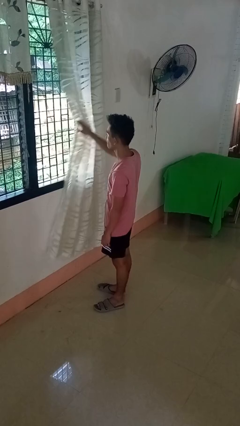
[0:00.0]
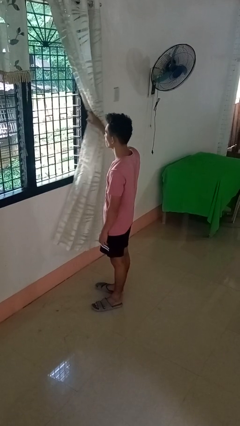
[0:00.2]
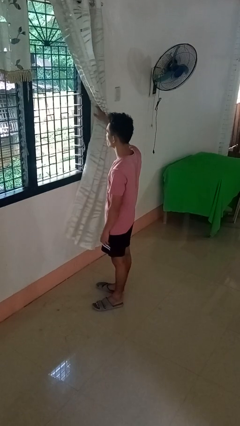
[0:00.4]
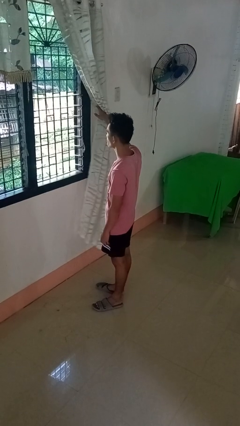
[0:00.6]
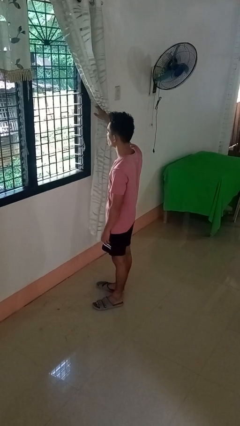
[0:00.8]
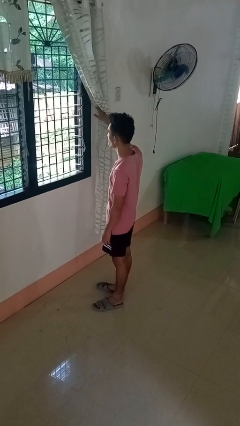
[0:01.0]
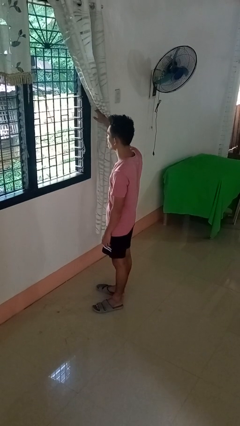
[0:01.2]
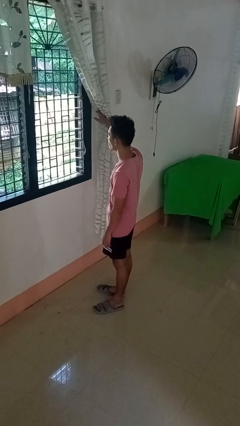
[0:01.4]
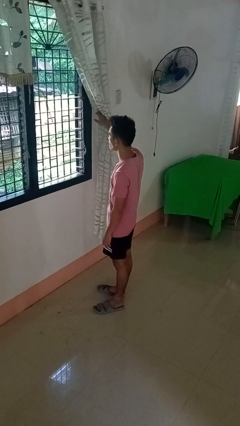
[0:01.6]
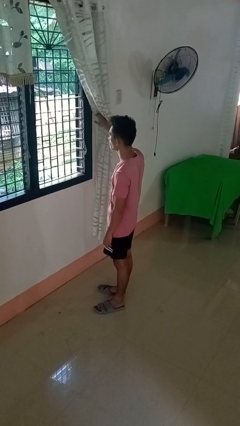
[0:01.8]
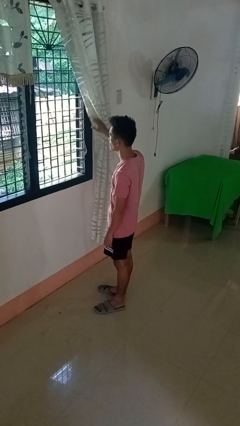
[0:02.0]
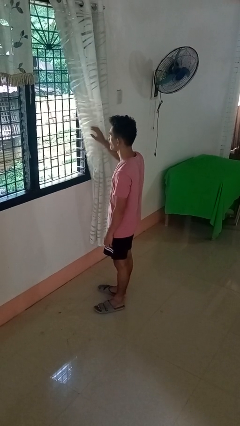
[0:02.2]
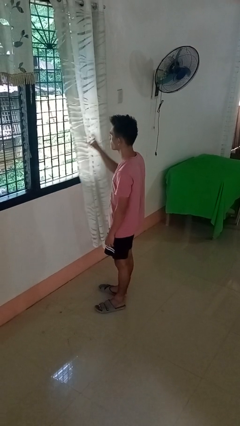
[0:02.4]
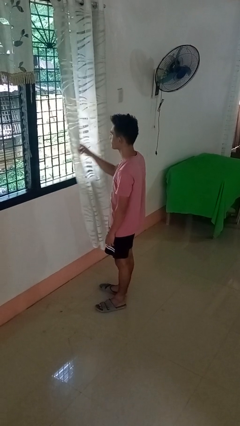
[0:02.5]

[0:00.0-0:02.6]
person opens curtains

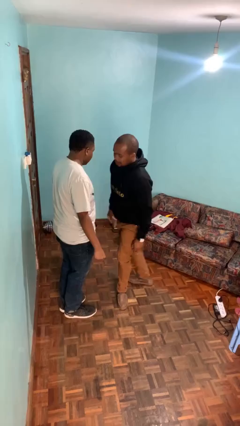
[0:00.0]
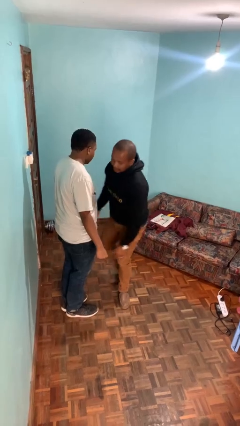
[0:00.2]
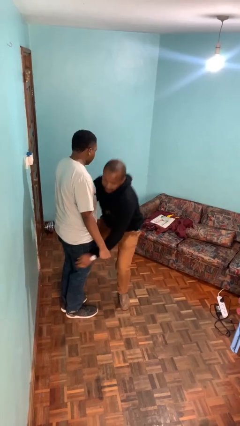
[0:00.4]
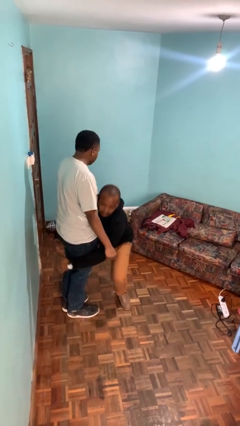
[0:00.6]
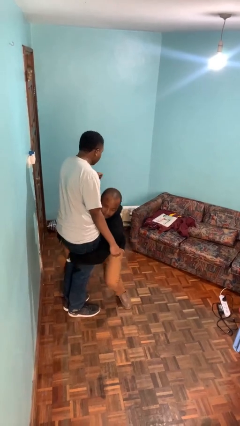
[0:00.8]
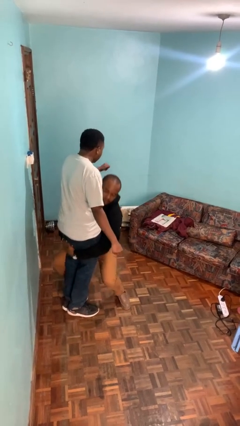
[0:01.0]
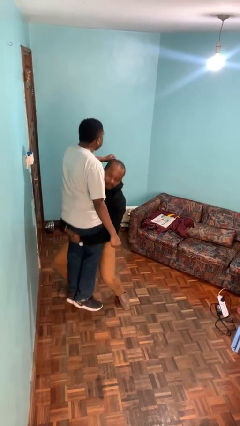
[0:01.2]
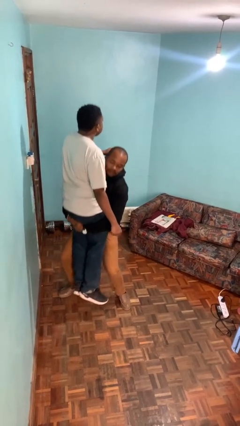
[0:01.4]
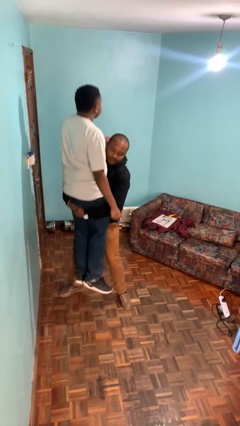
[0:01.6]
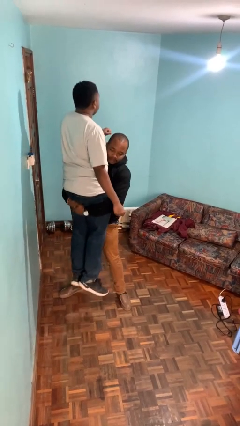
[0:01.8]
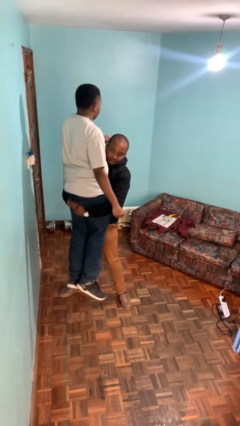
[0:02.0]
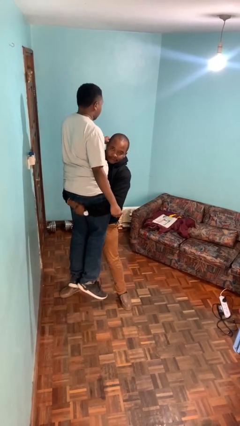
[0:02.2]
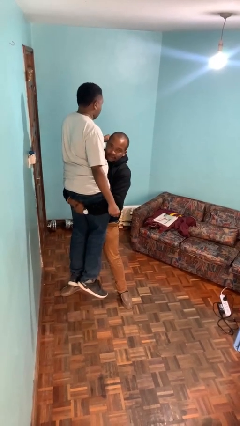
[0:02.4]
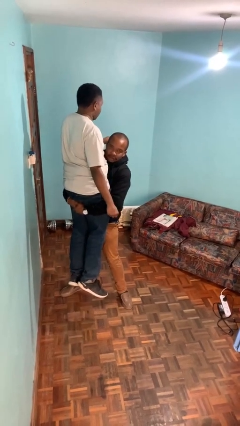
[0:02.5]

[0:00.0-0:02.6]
person picks up person

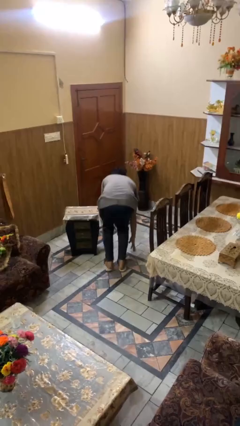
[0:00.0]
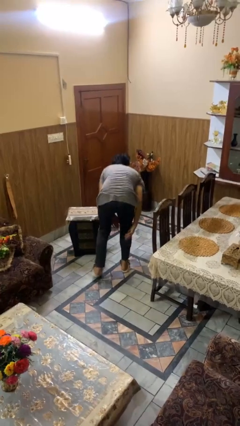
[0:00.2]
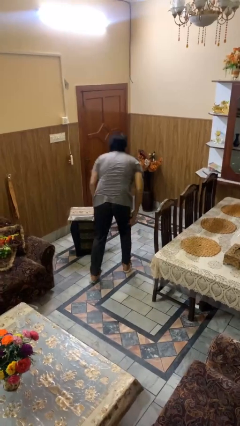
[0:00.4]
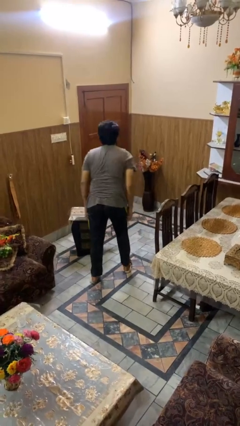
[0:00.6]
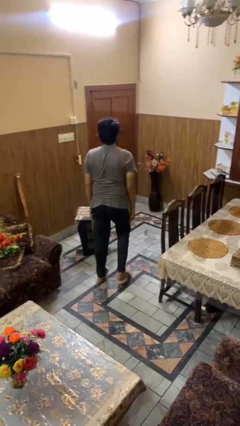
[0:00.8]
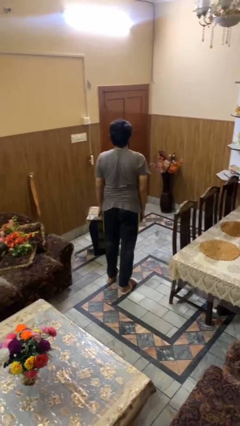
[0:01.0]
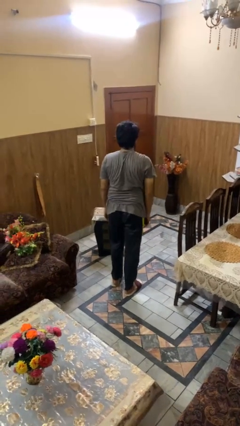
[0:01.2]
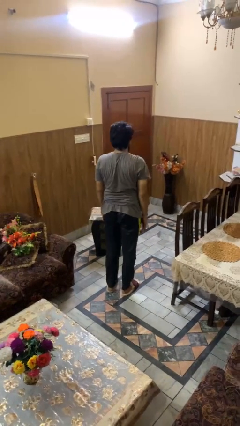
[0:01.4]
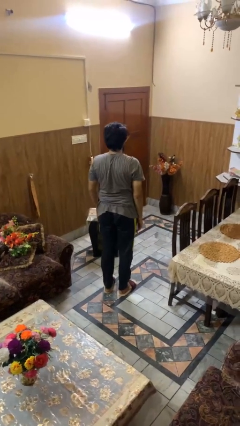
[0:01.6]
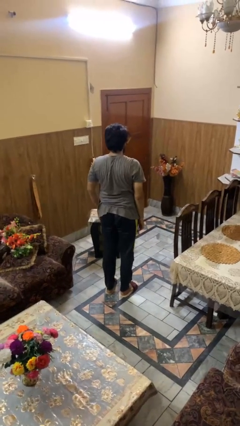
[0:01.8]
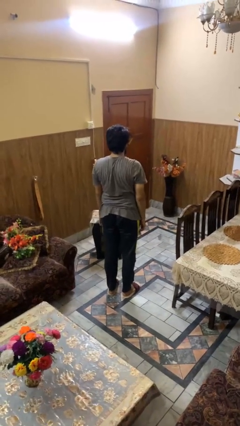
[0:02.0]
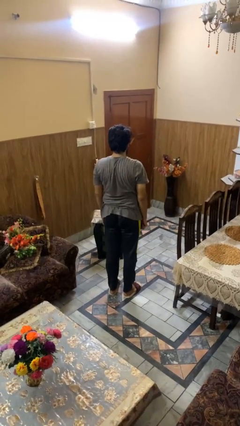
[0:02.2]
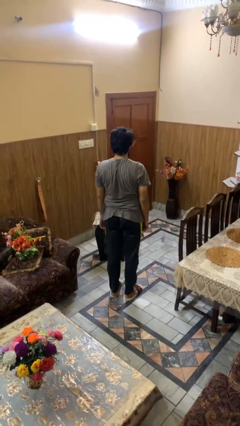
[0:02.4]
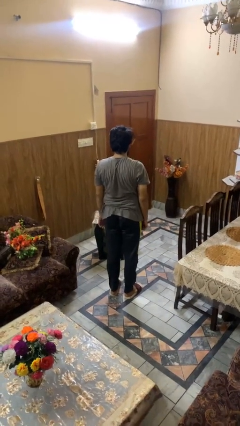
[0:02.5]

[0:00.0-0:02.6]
person stands up from floor

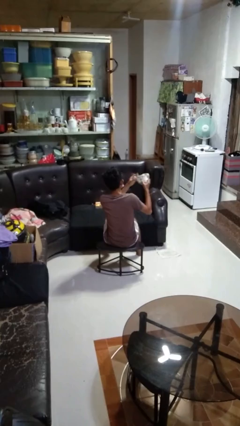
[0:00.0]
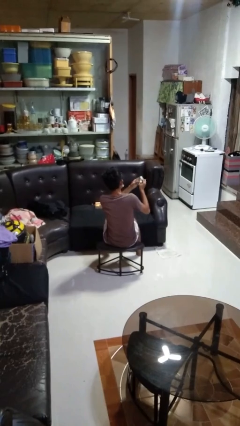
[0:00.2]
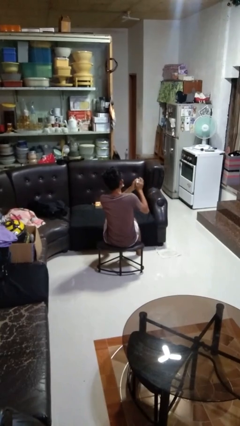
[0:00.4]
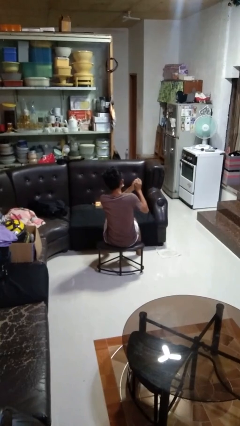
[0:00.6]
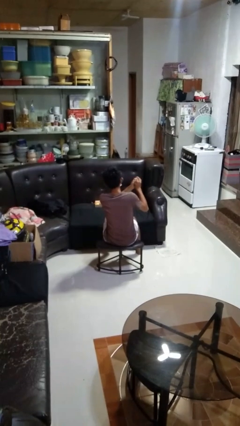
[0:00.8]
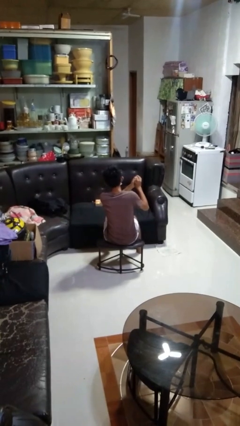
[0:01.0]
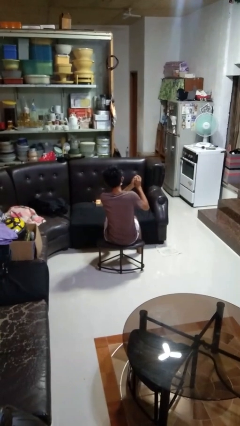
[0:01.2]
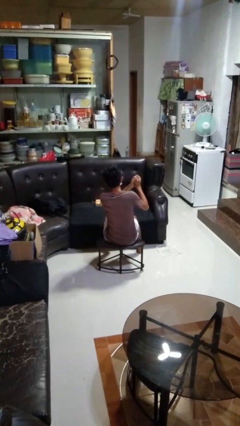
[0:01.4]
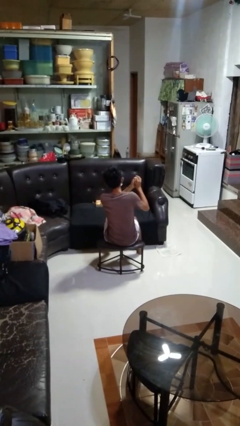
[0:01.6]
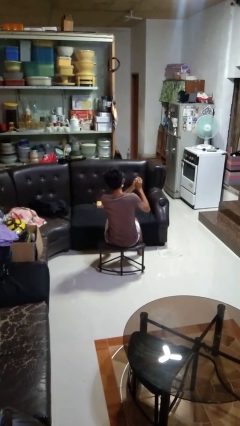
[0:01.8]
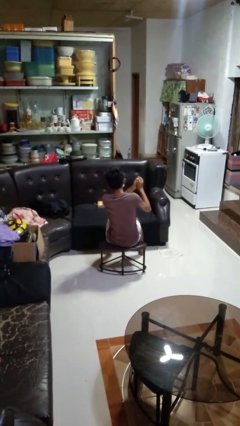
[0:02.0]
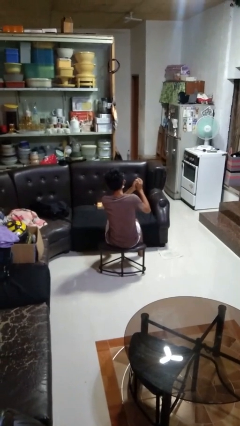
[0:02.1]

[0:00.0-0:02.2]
person crumples paper

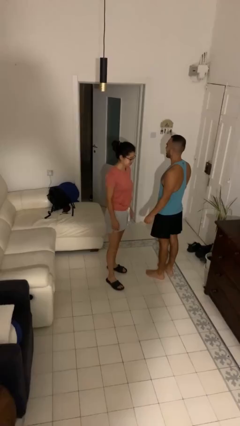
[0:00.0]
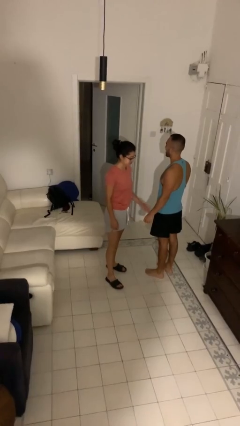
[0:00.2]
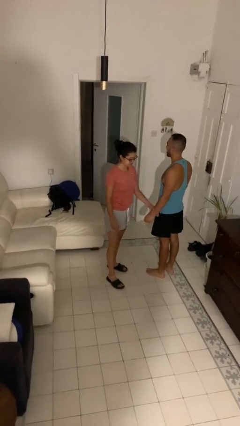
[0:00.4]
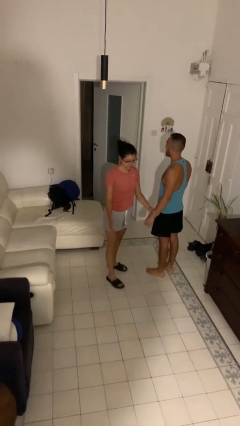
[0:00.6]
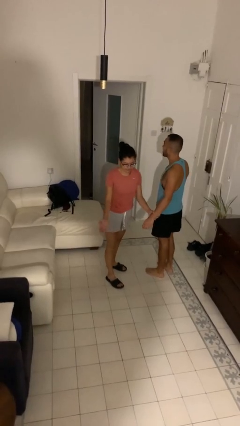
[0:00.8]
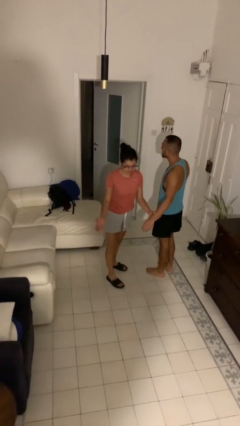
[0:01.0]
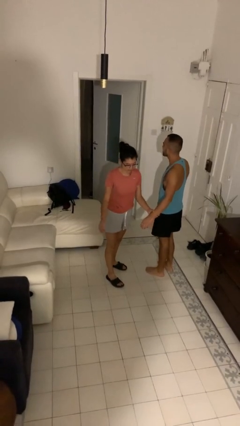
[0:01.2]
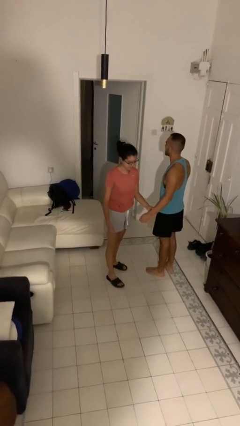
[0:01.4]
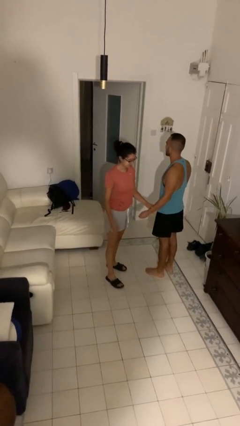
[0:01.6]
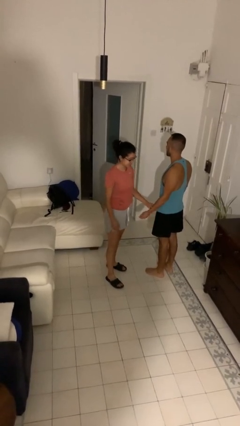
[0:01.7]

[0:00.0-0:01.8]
person grabs person by forearm

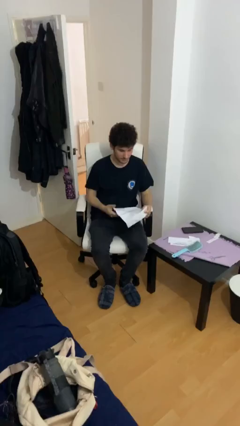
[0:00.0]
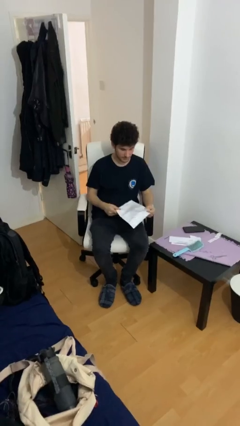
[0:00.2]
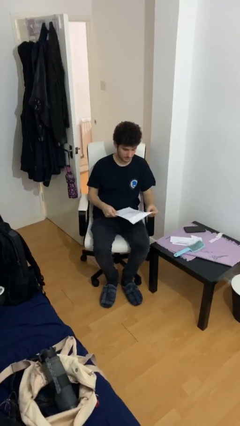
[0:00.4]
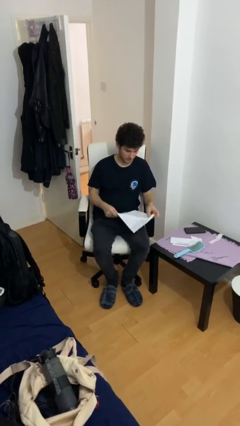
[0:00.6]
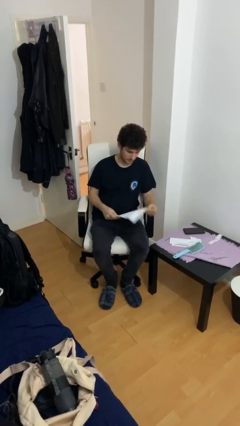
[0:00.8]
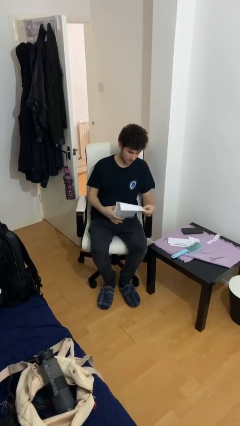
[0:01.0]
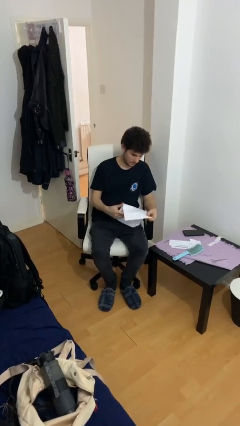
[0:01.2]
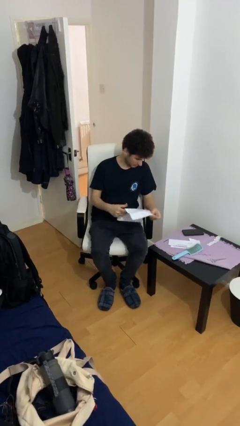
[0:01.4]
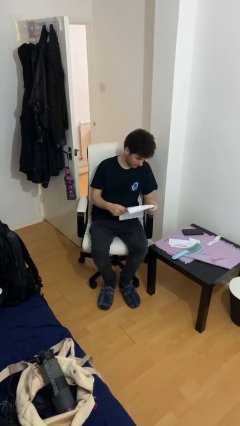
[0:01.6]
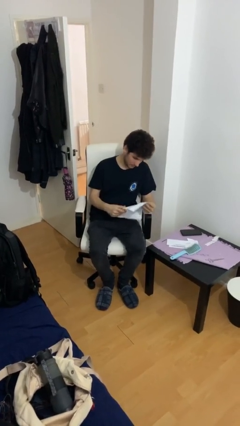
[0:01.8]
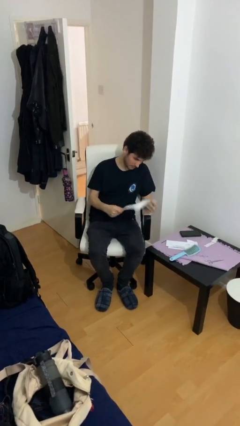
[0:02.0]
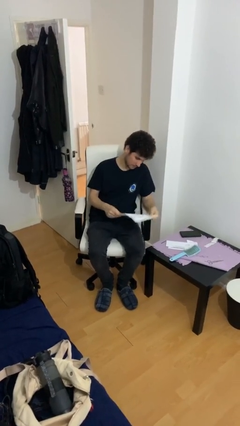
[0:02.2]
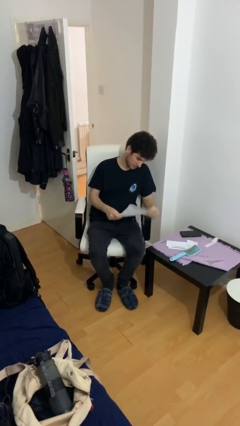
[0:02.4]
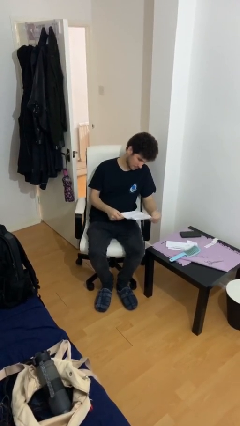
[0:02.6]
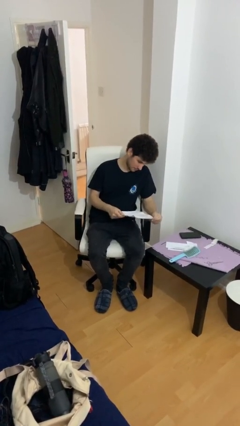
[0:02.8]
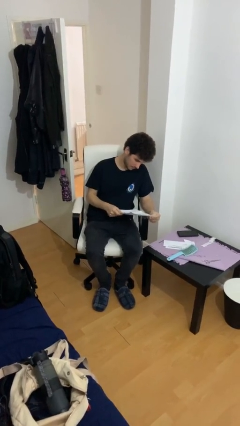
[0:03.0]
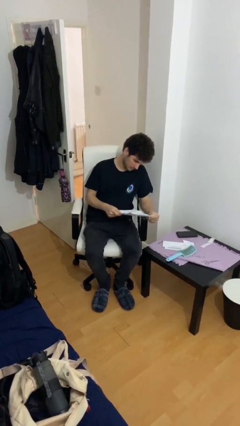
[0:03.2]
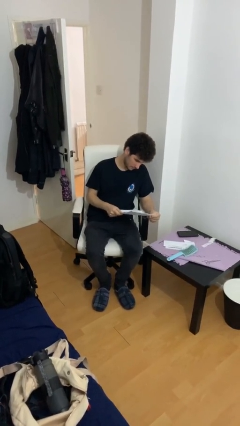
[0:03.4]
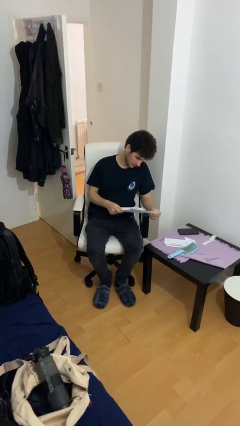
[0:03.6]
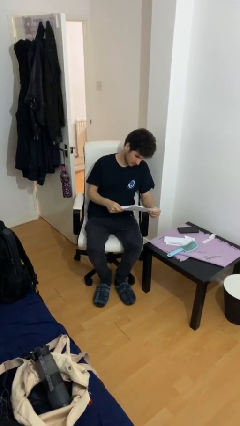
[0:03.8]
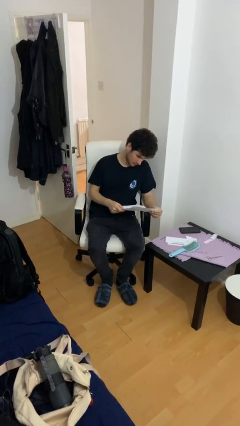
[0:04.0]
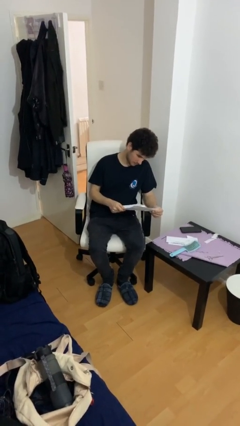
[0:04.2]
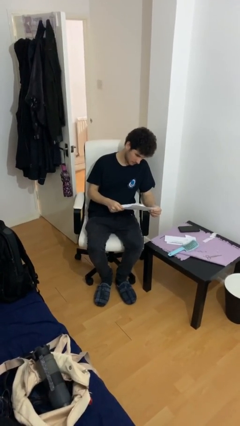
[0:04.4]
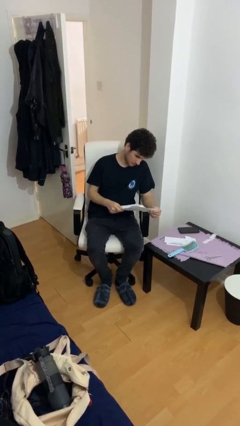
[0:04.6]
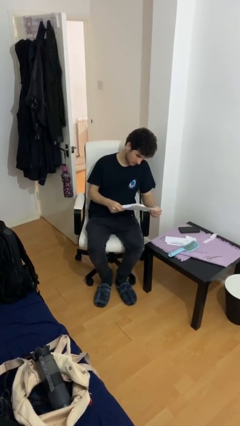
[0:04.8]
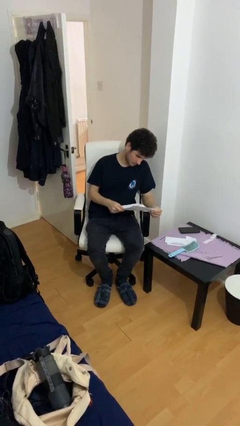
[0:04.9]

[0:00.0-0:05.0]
person reads document

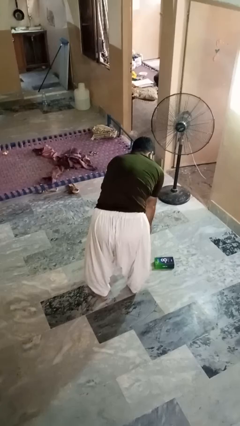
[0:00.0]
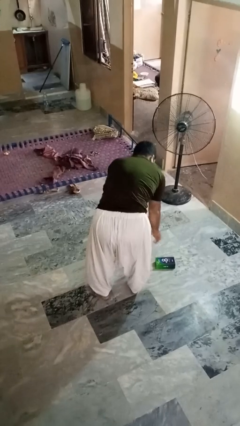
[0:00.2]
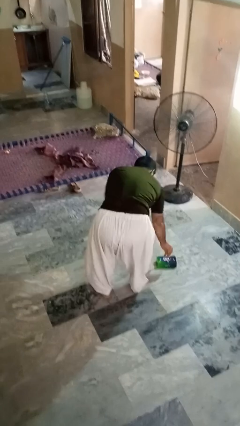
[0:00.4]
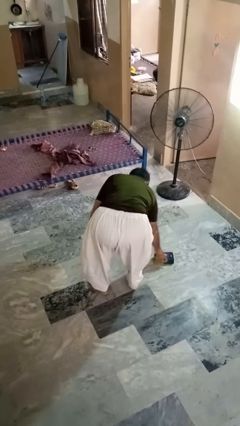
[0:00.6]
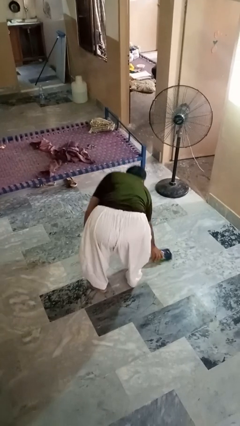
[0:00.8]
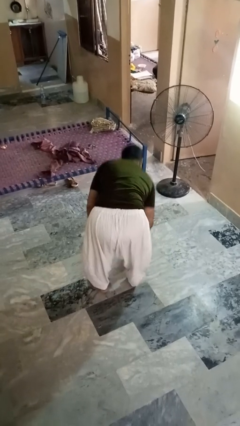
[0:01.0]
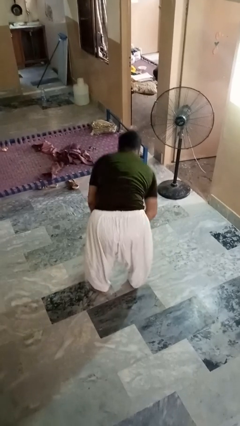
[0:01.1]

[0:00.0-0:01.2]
person picks up object from floor
